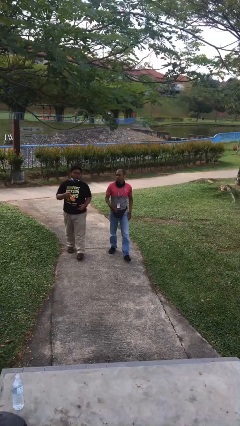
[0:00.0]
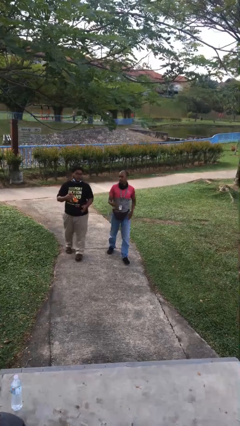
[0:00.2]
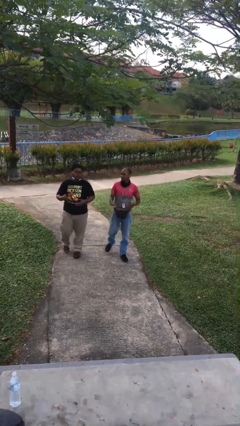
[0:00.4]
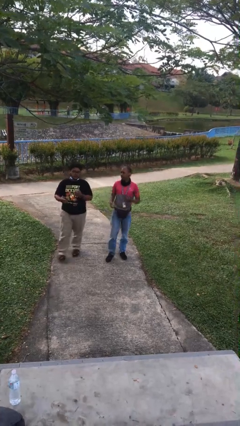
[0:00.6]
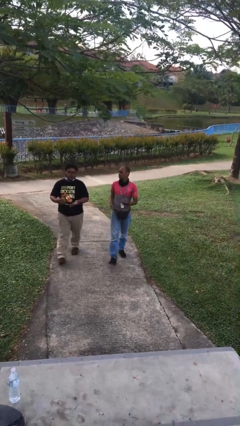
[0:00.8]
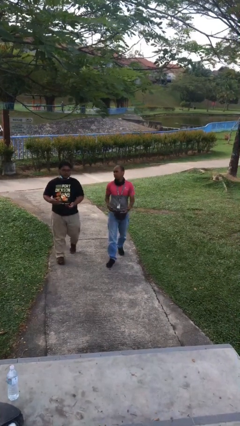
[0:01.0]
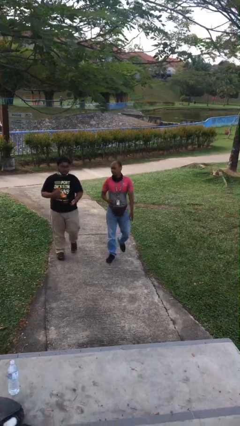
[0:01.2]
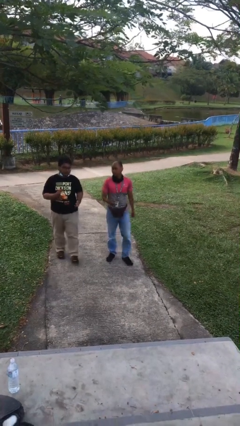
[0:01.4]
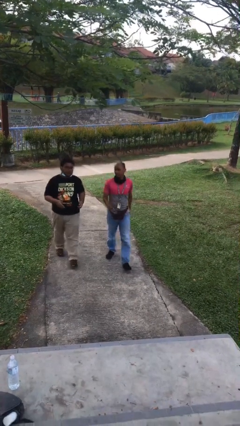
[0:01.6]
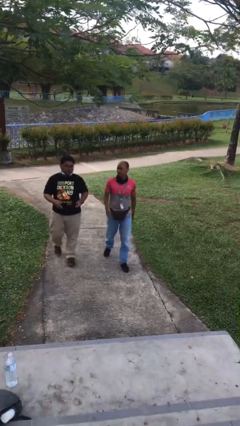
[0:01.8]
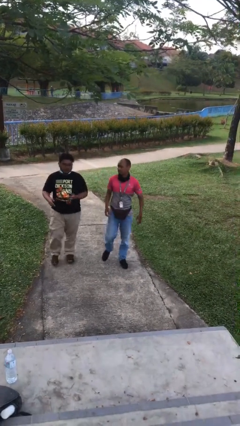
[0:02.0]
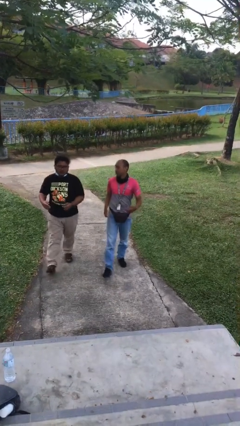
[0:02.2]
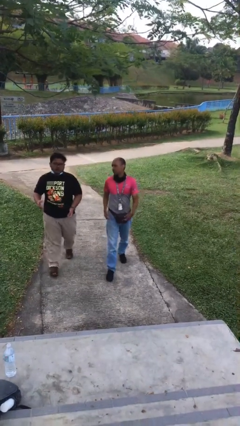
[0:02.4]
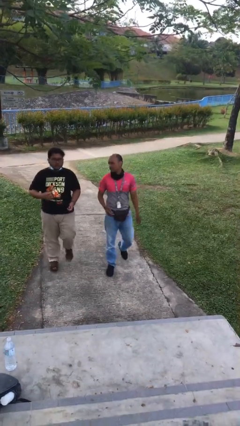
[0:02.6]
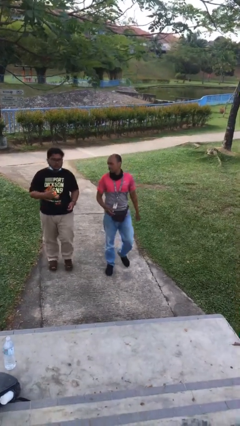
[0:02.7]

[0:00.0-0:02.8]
person talks to person

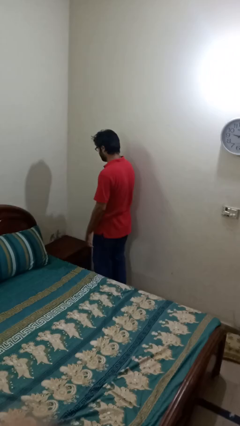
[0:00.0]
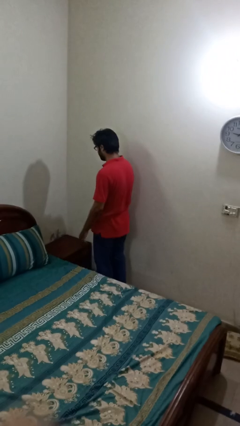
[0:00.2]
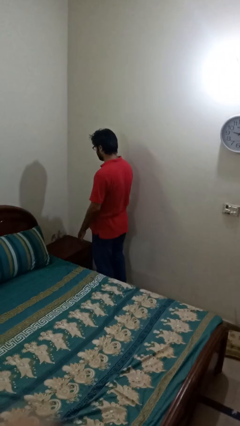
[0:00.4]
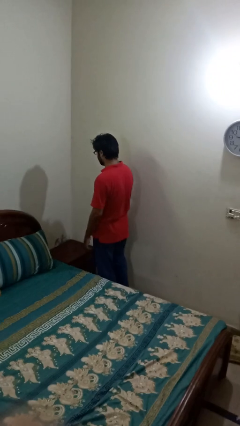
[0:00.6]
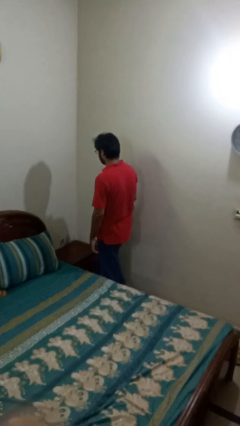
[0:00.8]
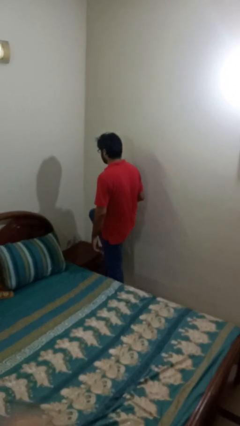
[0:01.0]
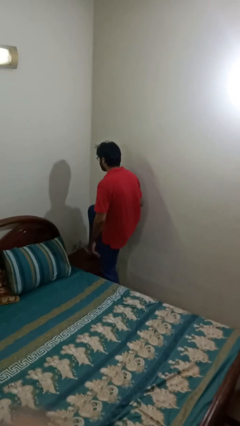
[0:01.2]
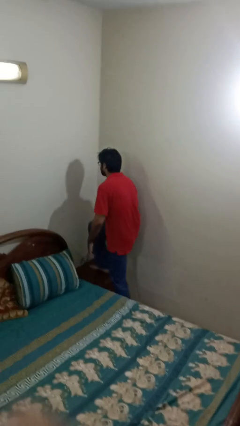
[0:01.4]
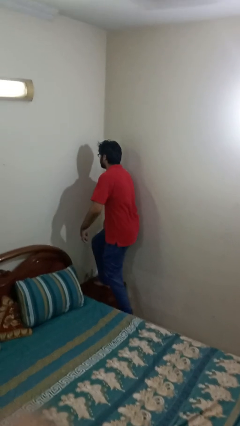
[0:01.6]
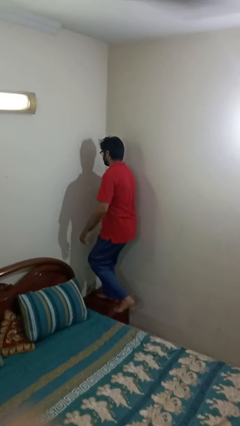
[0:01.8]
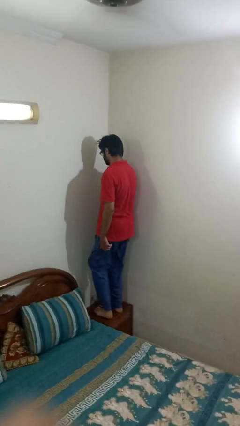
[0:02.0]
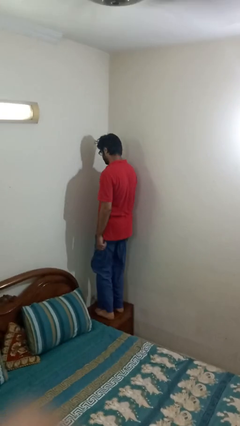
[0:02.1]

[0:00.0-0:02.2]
person climbs on table

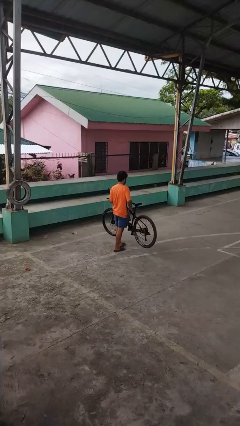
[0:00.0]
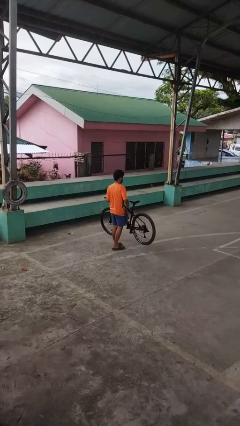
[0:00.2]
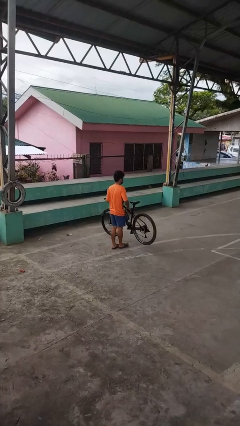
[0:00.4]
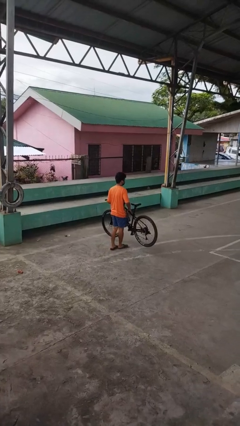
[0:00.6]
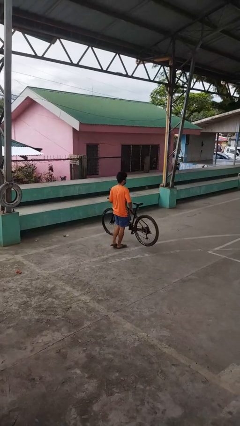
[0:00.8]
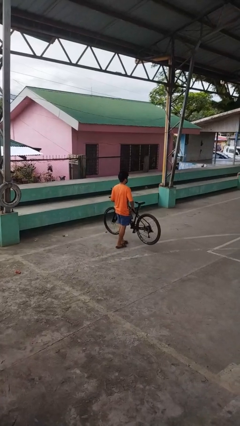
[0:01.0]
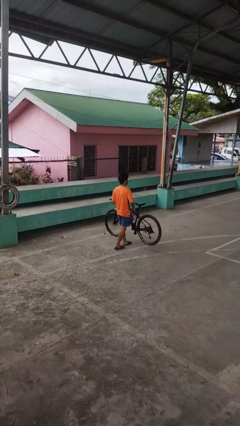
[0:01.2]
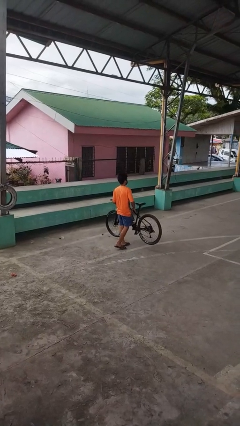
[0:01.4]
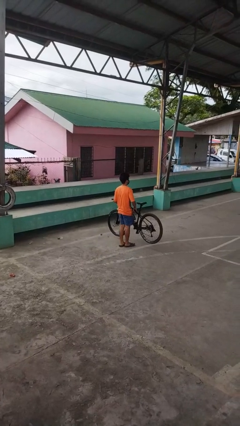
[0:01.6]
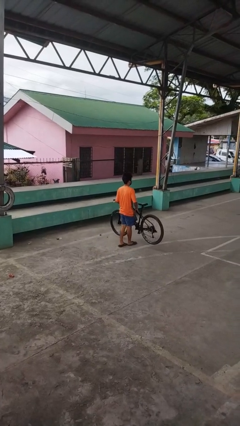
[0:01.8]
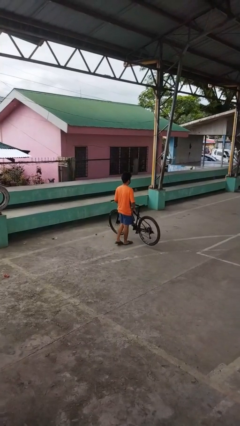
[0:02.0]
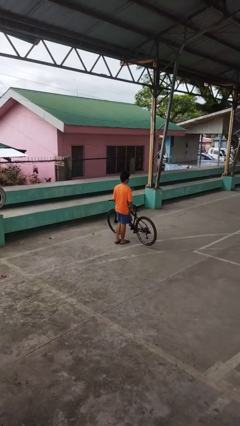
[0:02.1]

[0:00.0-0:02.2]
person carries bicycle

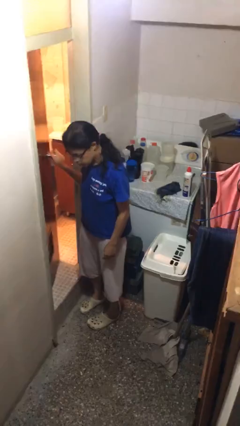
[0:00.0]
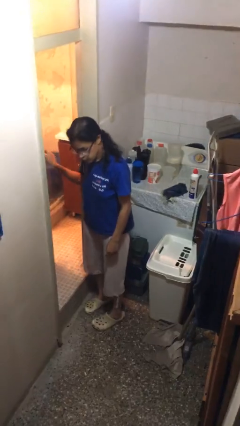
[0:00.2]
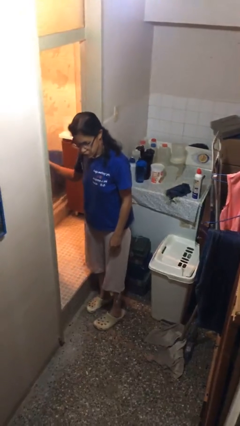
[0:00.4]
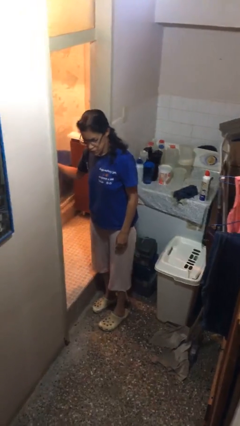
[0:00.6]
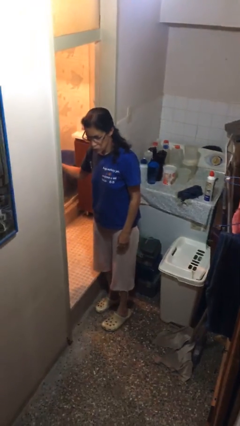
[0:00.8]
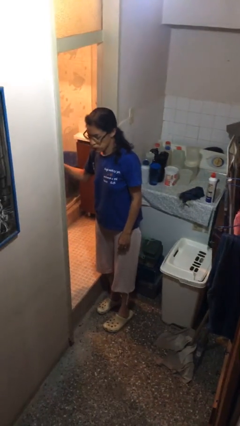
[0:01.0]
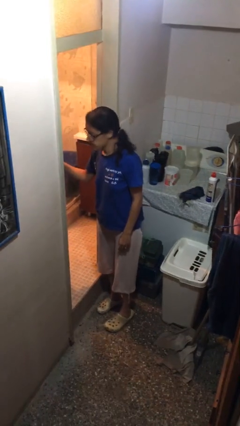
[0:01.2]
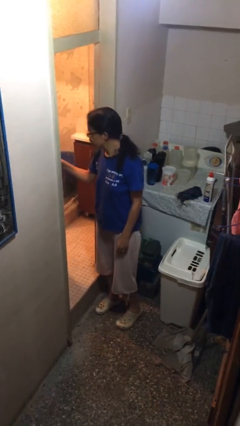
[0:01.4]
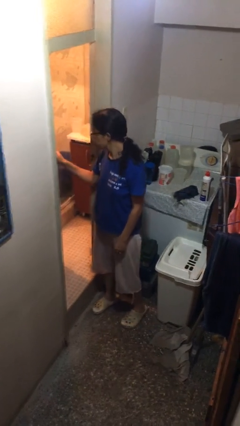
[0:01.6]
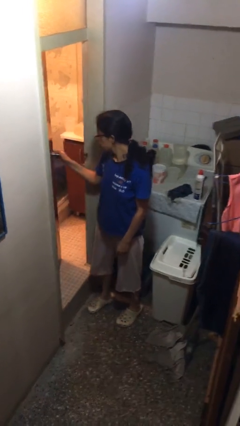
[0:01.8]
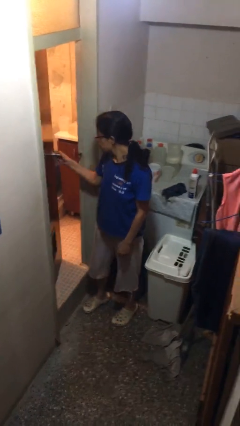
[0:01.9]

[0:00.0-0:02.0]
person opens facility door

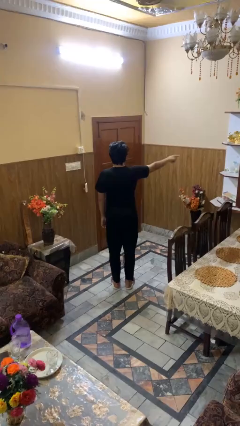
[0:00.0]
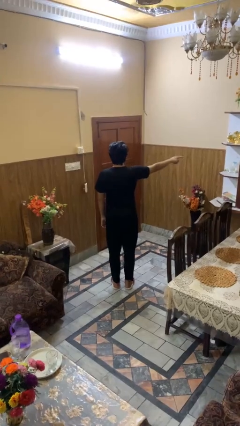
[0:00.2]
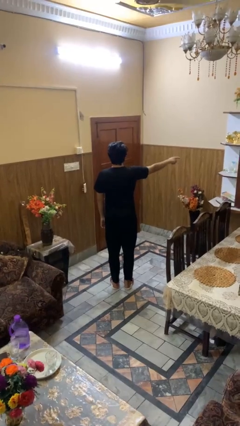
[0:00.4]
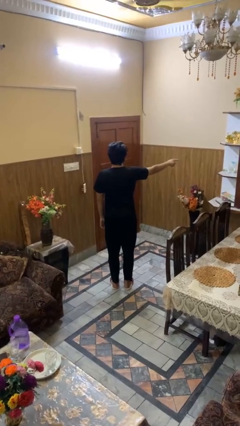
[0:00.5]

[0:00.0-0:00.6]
person gestures swipe right

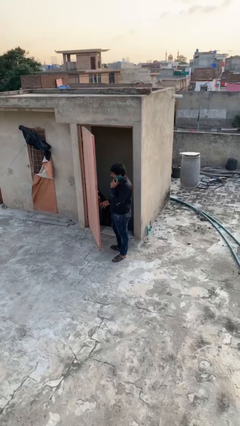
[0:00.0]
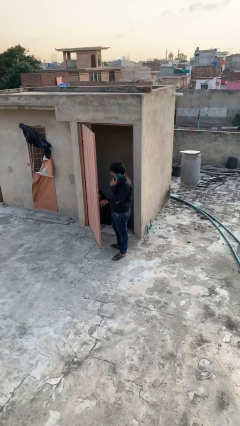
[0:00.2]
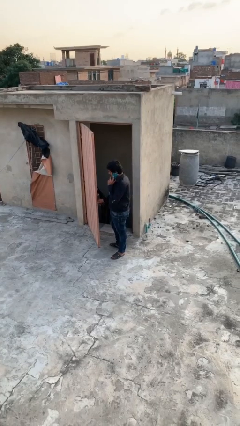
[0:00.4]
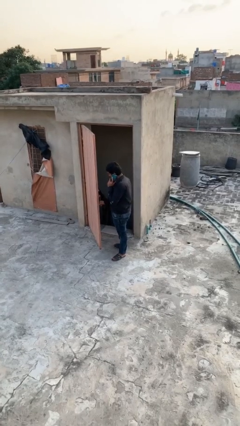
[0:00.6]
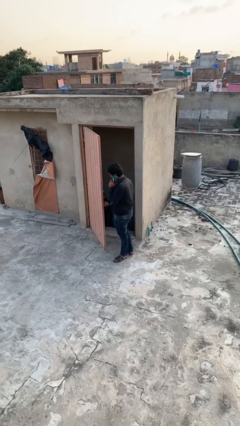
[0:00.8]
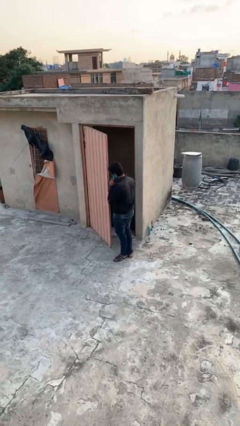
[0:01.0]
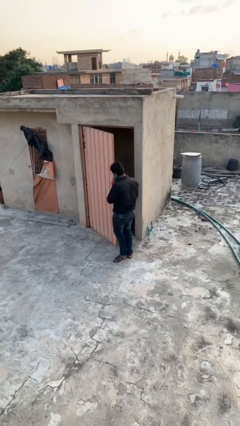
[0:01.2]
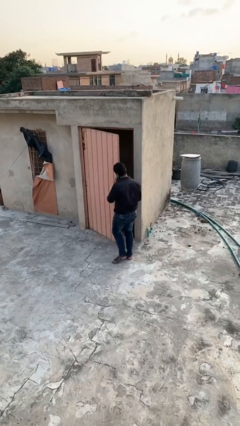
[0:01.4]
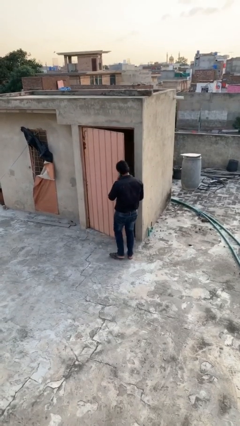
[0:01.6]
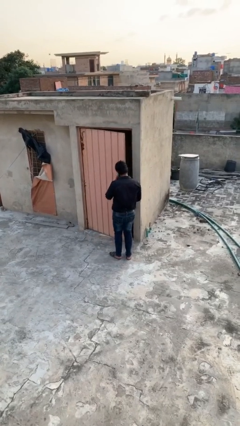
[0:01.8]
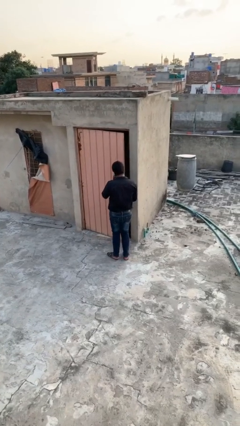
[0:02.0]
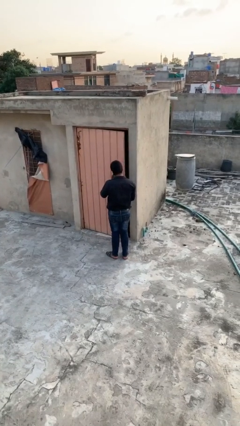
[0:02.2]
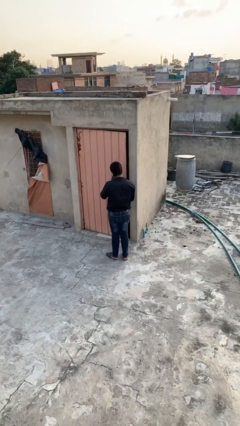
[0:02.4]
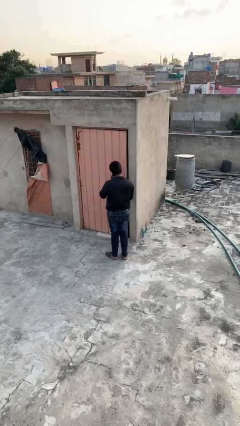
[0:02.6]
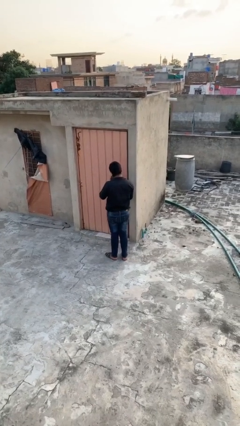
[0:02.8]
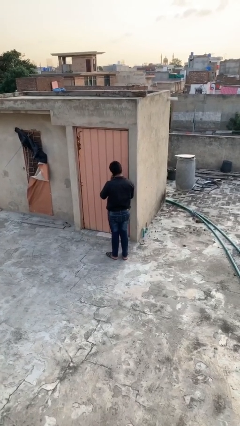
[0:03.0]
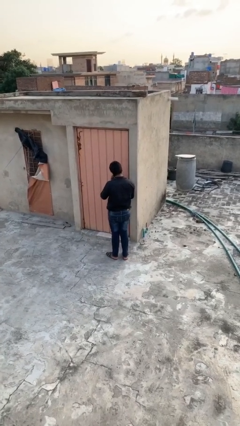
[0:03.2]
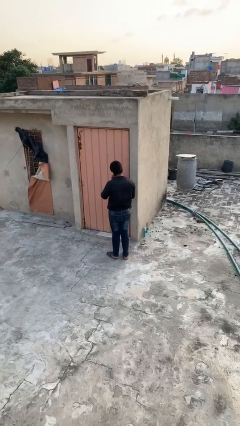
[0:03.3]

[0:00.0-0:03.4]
person closes facility door

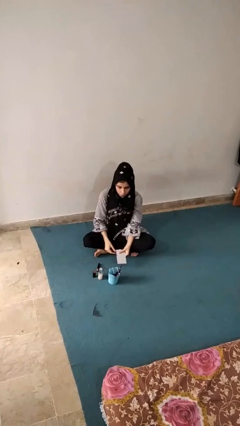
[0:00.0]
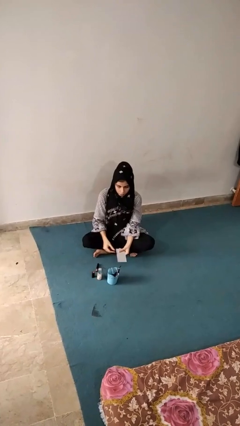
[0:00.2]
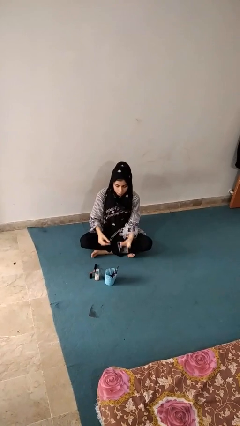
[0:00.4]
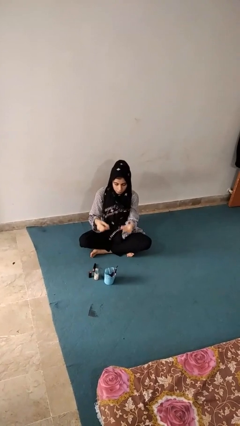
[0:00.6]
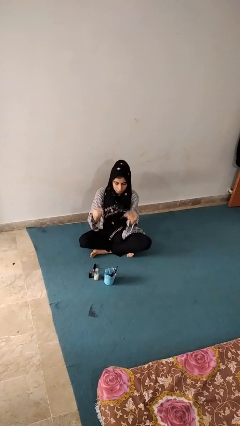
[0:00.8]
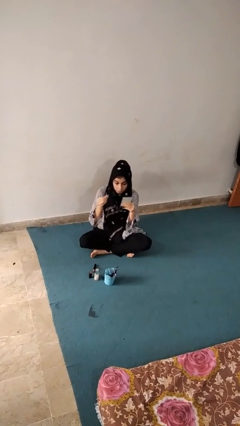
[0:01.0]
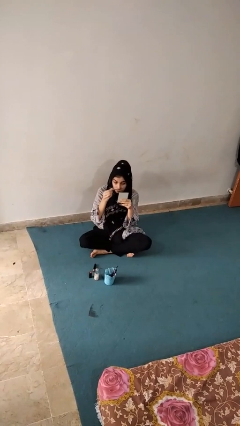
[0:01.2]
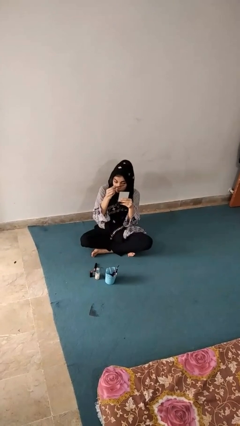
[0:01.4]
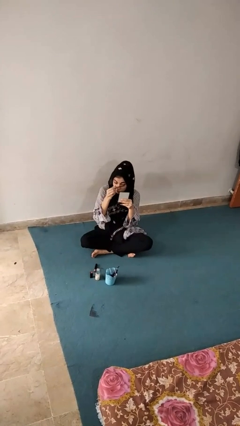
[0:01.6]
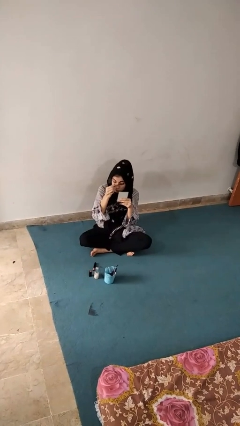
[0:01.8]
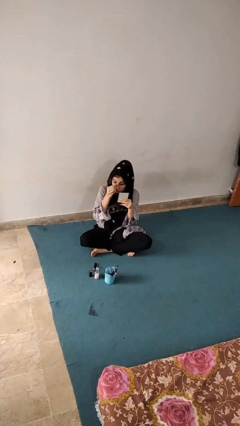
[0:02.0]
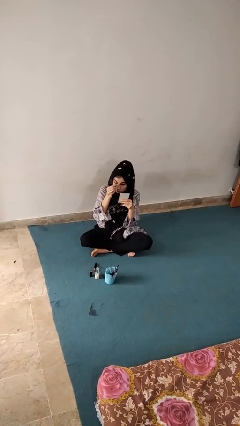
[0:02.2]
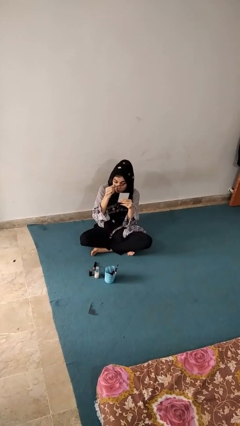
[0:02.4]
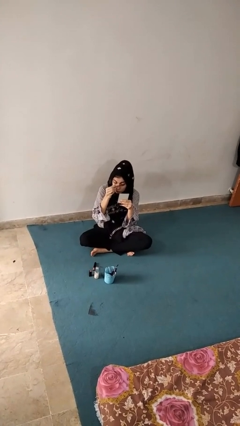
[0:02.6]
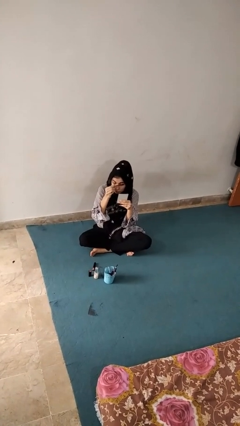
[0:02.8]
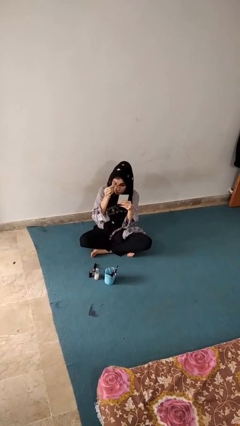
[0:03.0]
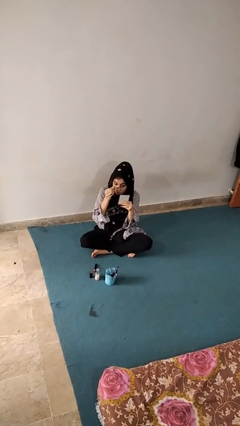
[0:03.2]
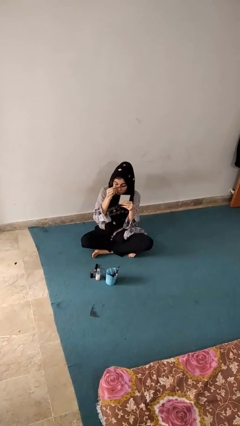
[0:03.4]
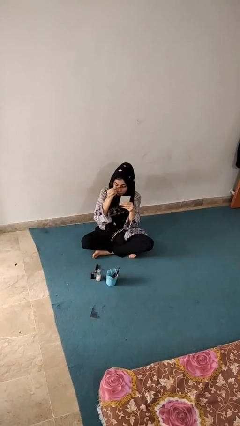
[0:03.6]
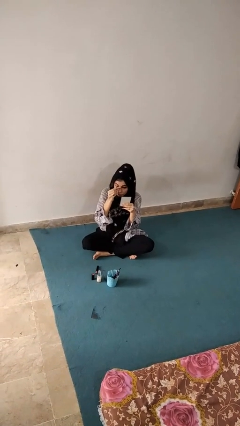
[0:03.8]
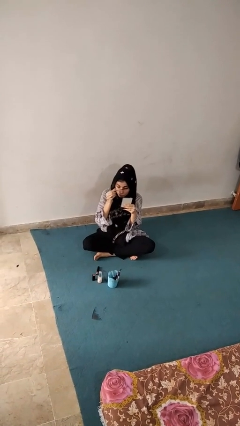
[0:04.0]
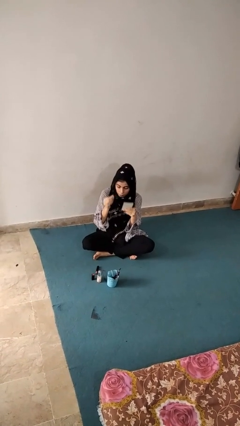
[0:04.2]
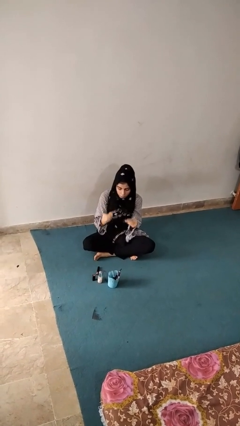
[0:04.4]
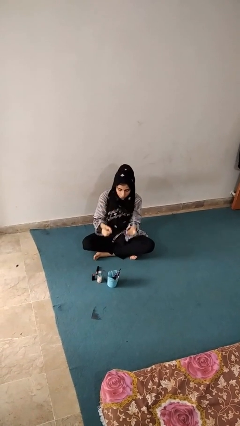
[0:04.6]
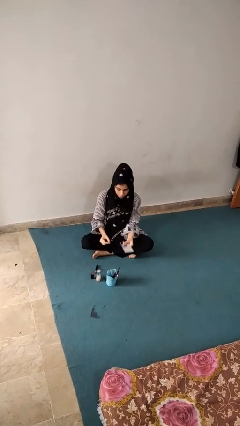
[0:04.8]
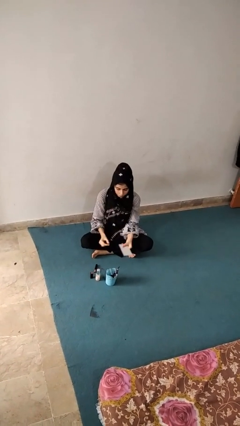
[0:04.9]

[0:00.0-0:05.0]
person applies eye makeup
